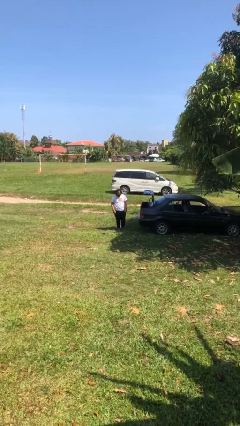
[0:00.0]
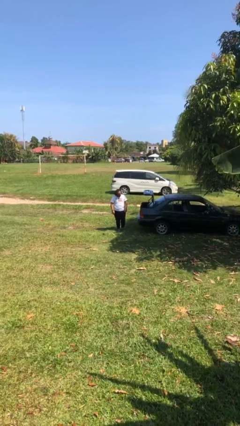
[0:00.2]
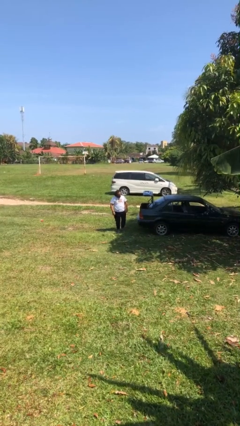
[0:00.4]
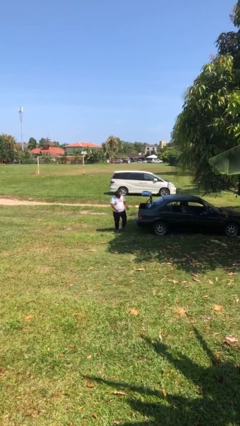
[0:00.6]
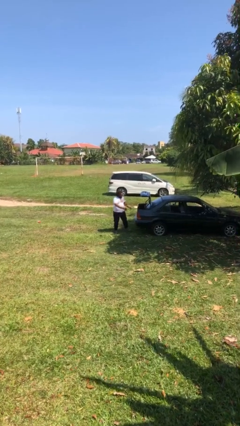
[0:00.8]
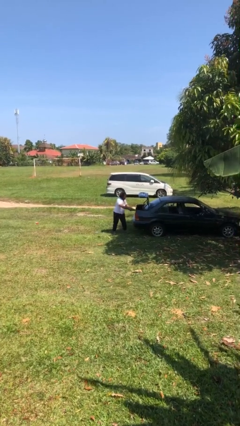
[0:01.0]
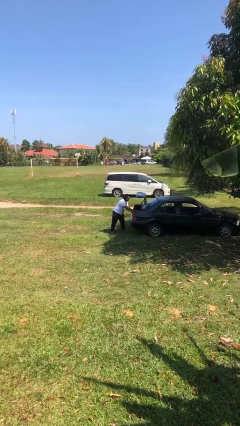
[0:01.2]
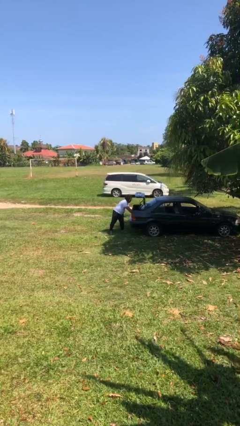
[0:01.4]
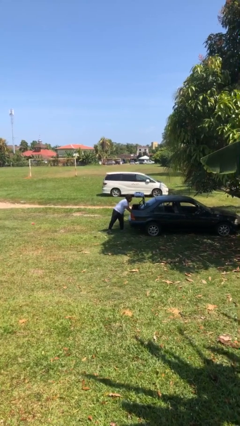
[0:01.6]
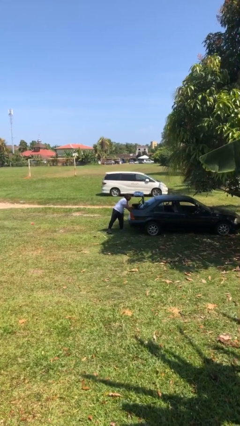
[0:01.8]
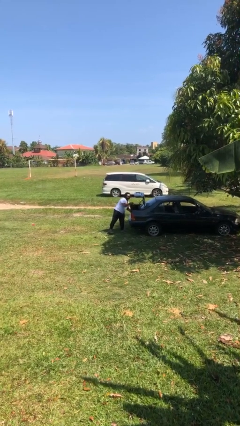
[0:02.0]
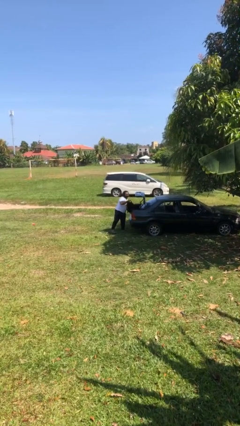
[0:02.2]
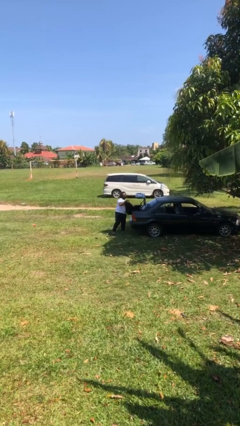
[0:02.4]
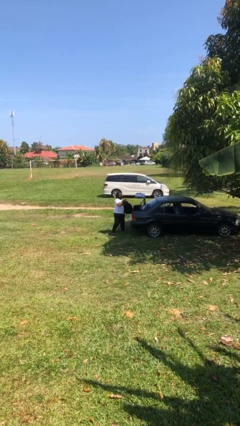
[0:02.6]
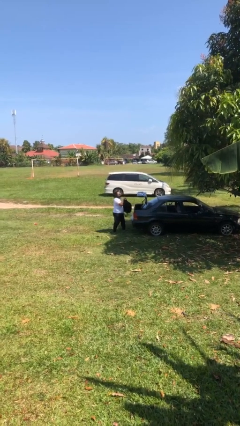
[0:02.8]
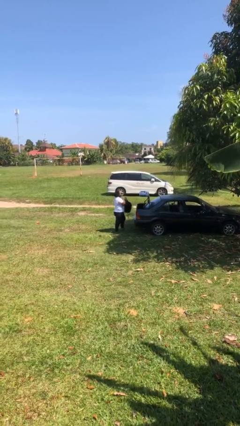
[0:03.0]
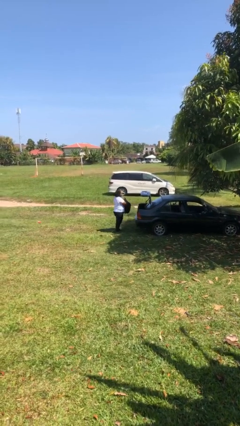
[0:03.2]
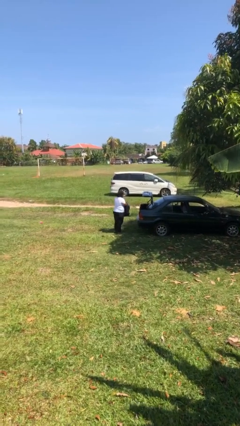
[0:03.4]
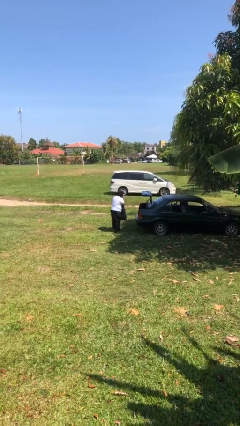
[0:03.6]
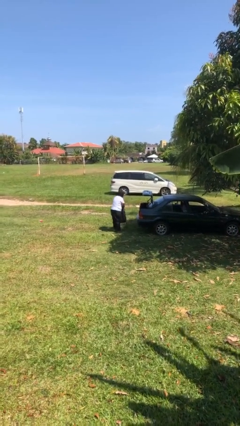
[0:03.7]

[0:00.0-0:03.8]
person unloads car

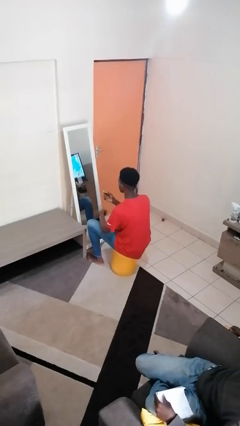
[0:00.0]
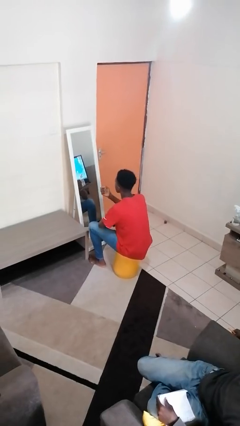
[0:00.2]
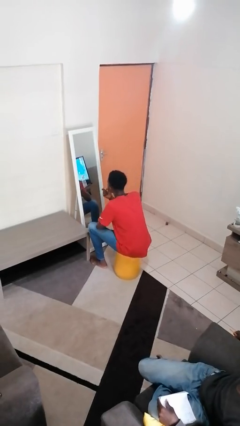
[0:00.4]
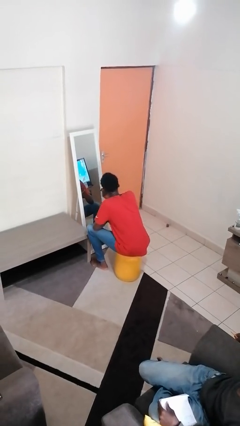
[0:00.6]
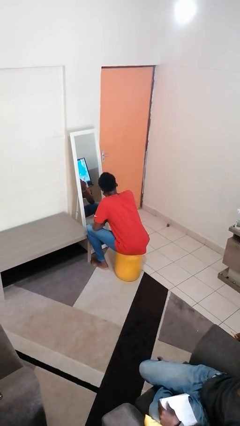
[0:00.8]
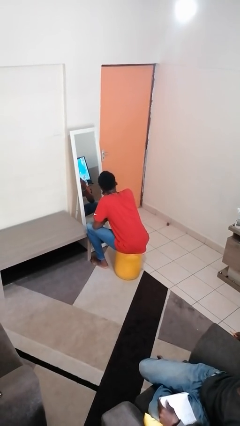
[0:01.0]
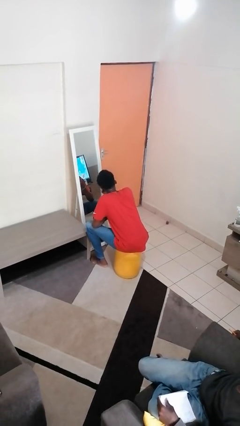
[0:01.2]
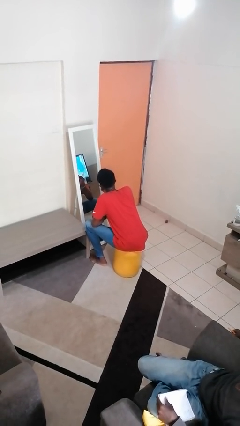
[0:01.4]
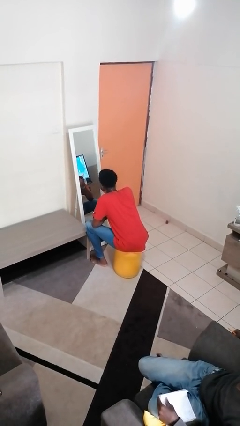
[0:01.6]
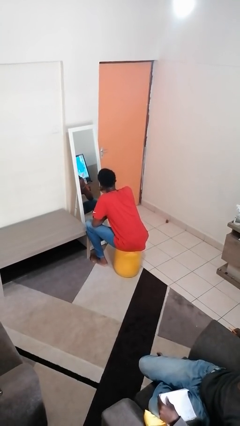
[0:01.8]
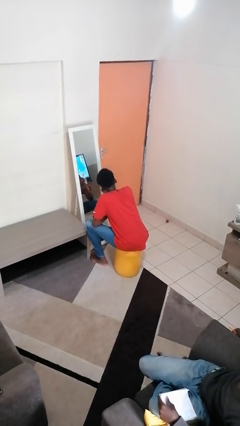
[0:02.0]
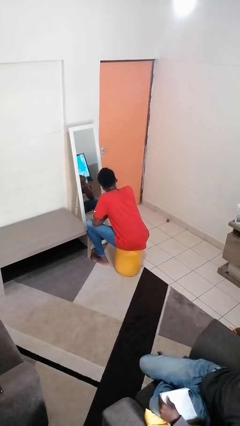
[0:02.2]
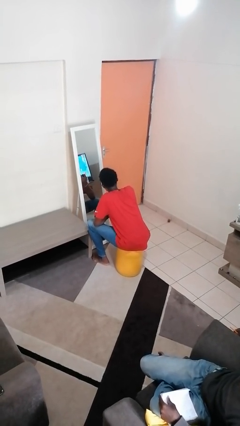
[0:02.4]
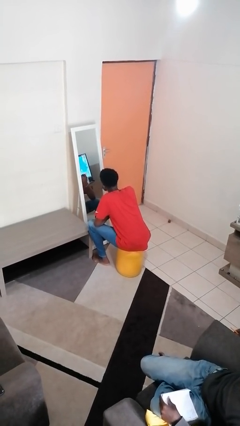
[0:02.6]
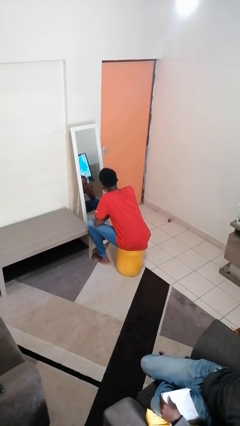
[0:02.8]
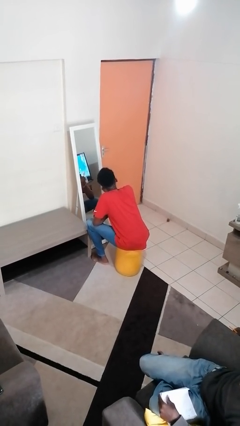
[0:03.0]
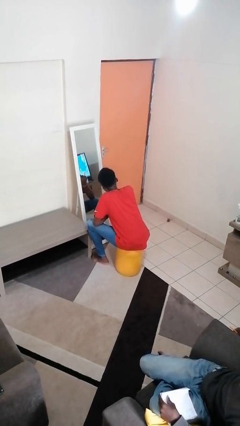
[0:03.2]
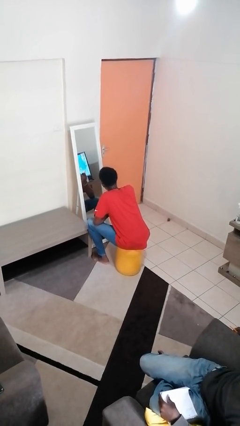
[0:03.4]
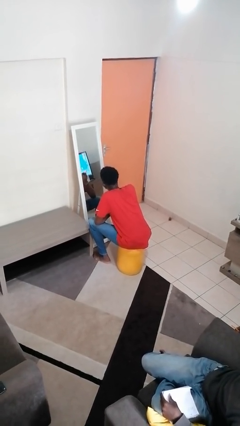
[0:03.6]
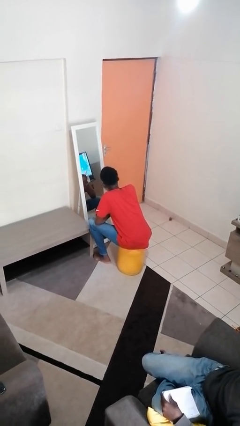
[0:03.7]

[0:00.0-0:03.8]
person applies lip makeup

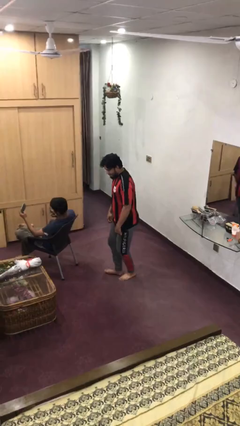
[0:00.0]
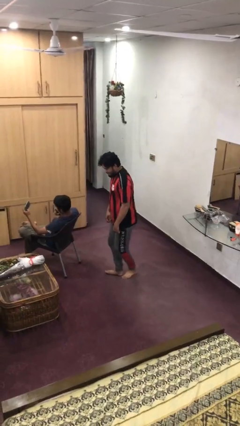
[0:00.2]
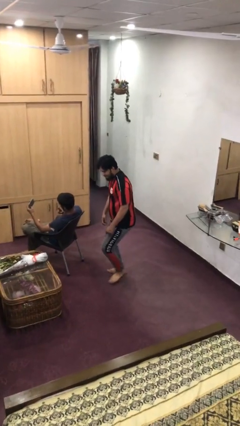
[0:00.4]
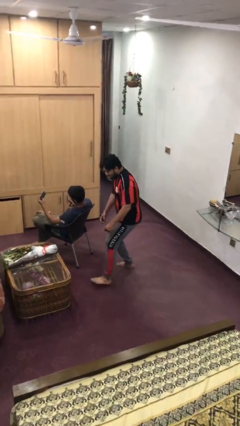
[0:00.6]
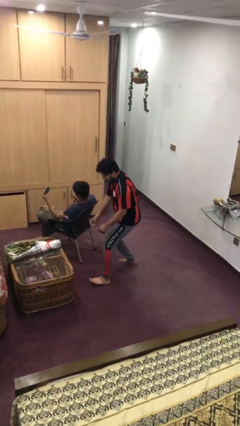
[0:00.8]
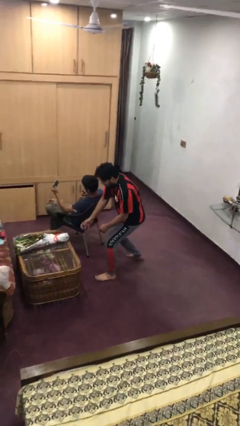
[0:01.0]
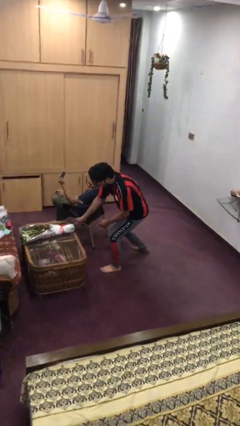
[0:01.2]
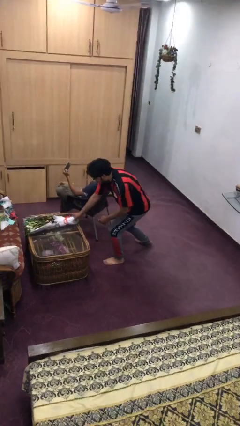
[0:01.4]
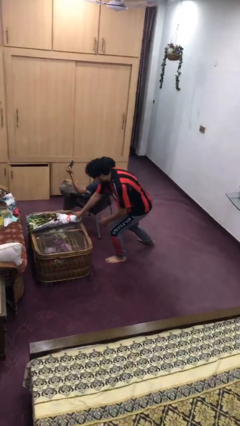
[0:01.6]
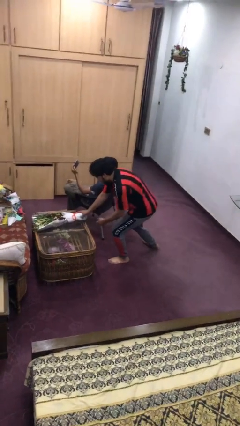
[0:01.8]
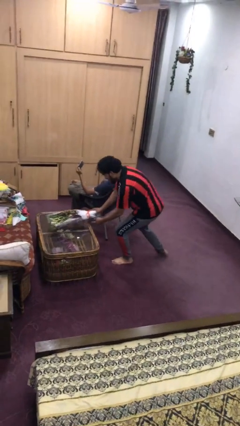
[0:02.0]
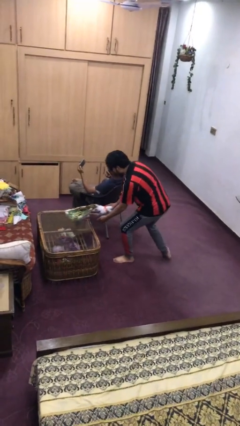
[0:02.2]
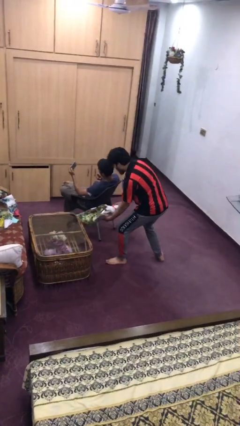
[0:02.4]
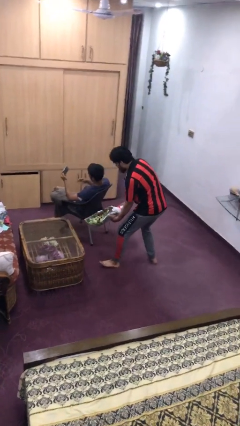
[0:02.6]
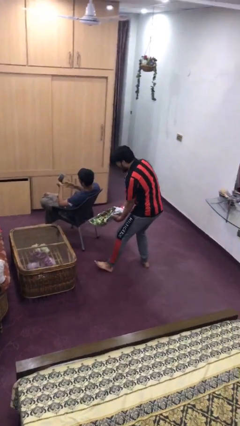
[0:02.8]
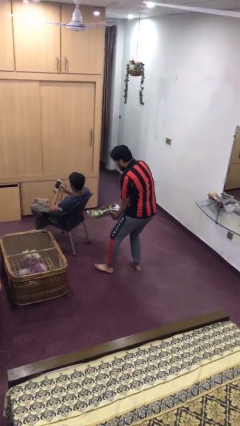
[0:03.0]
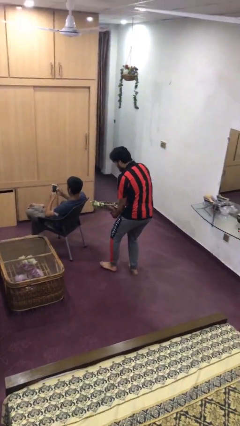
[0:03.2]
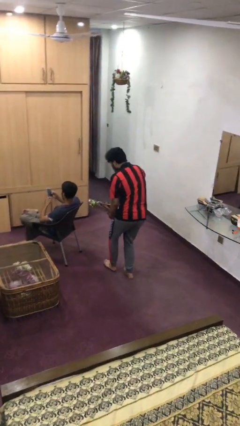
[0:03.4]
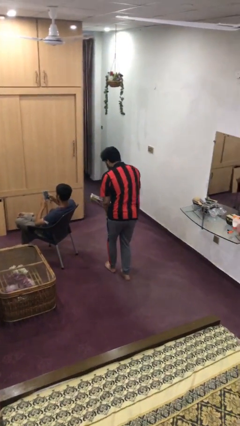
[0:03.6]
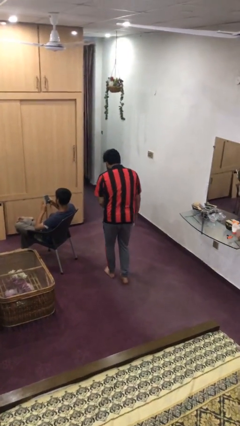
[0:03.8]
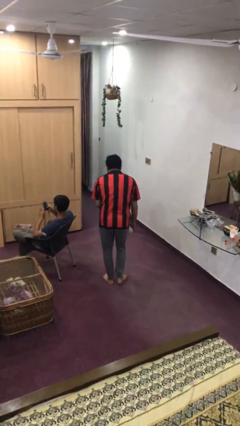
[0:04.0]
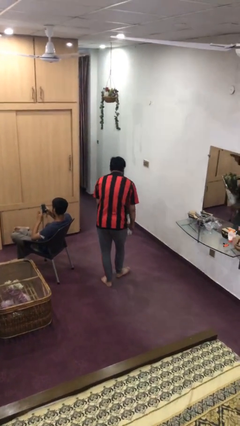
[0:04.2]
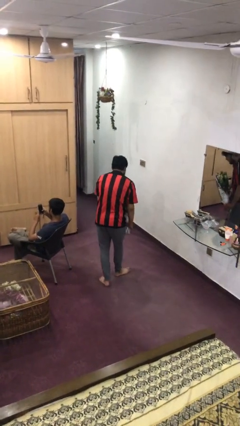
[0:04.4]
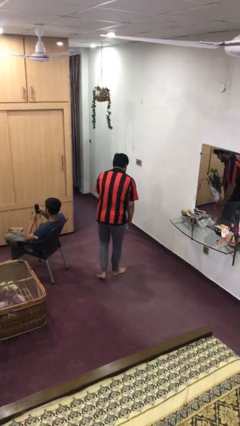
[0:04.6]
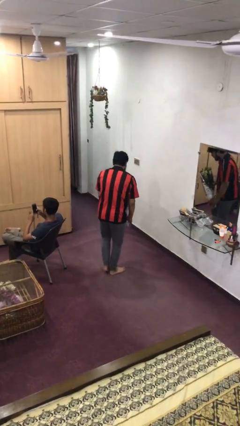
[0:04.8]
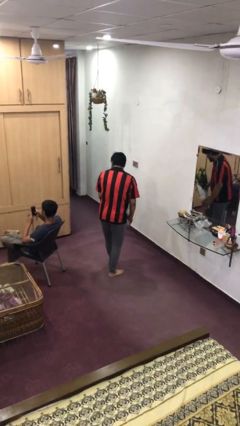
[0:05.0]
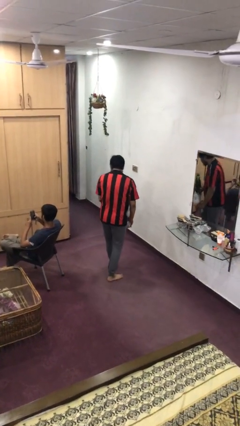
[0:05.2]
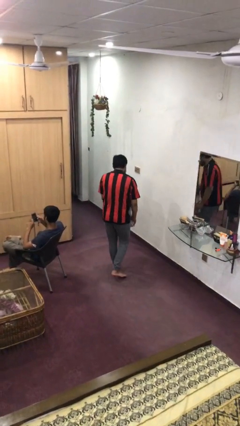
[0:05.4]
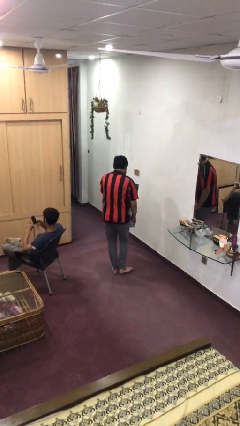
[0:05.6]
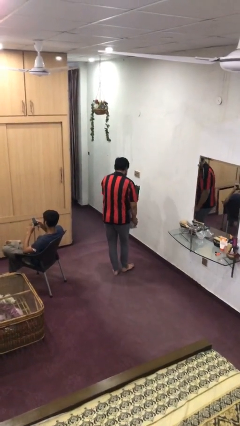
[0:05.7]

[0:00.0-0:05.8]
person steals object from person

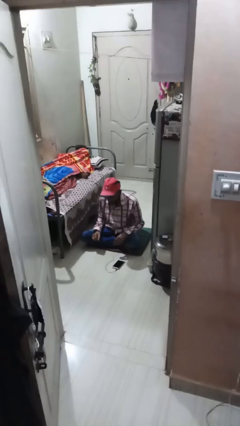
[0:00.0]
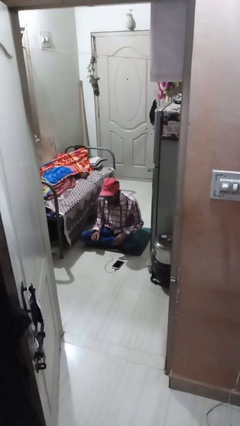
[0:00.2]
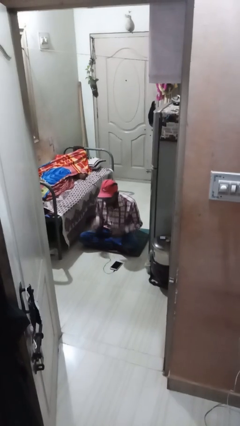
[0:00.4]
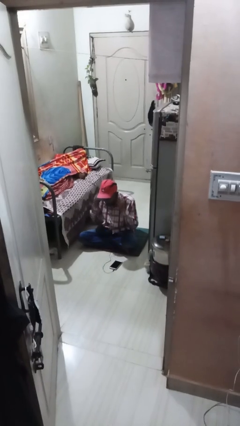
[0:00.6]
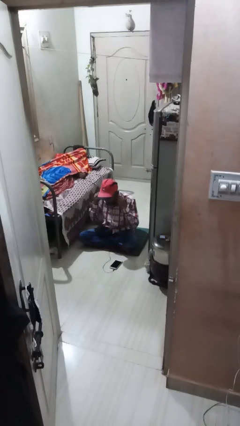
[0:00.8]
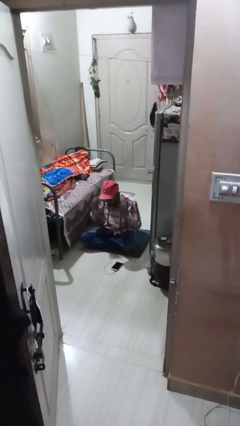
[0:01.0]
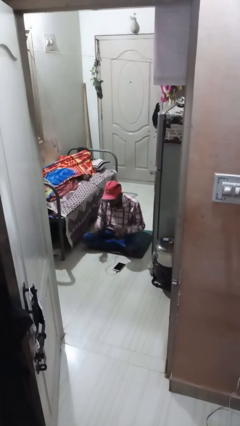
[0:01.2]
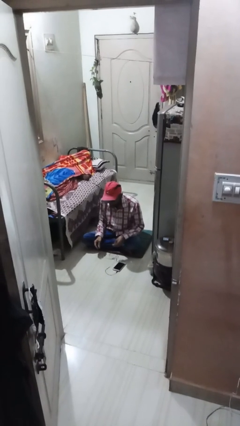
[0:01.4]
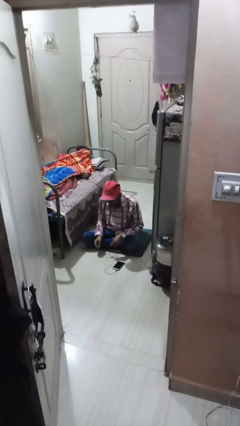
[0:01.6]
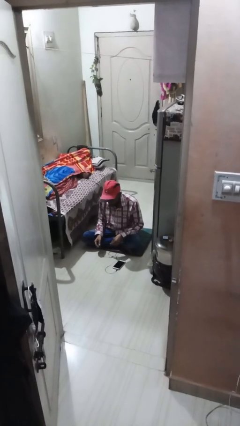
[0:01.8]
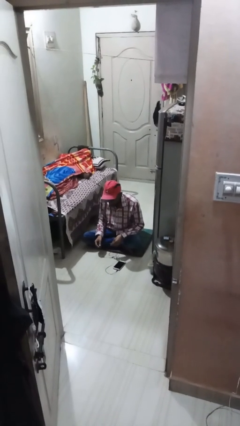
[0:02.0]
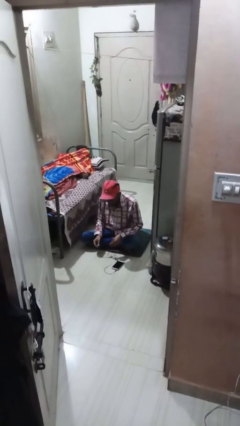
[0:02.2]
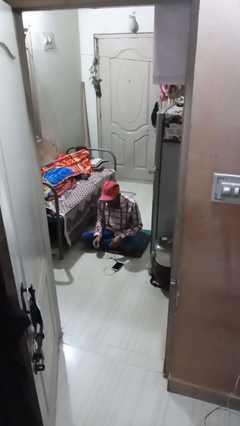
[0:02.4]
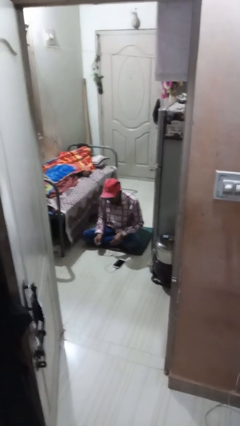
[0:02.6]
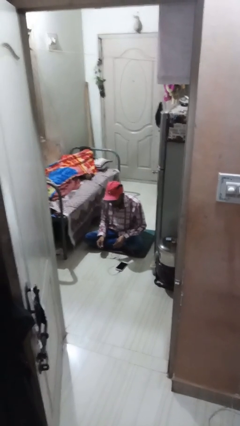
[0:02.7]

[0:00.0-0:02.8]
person takes off headphones

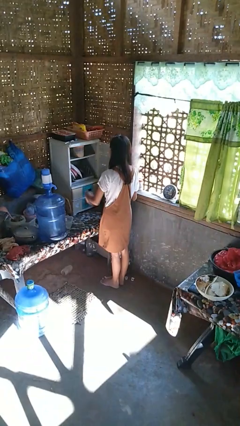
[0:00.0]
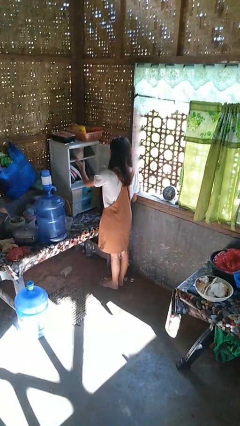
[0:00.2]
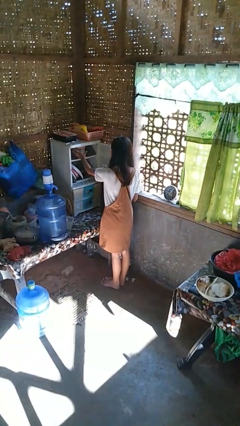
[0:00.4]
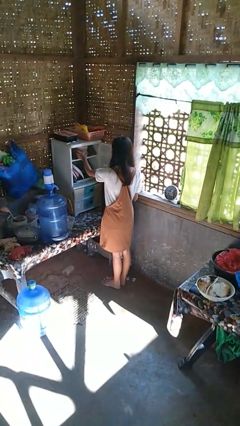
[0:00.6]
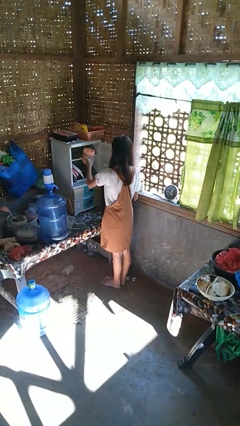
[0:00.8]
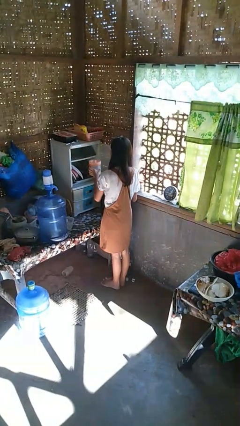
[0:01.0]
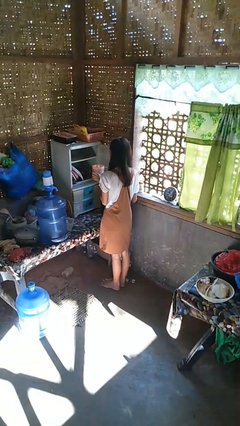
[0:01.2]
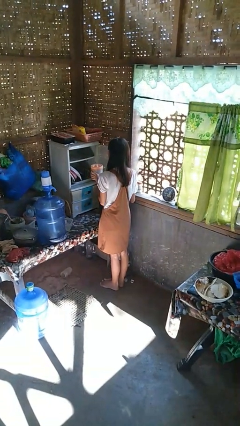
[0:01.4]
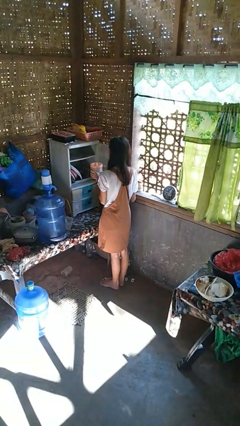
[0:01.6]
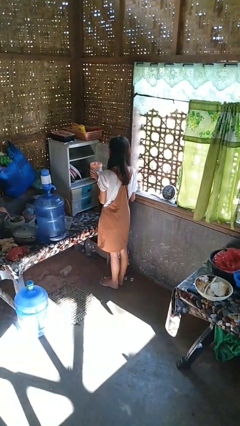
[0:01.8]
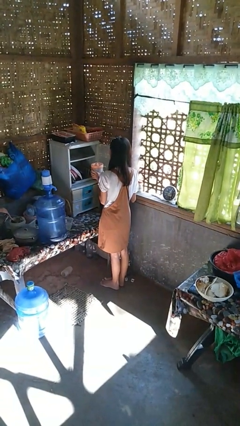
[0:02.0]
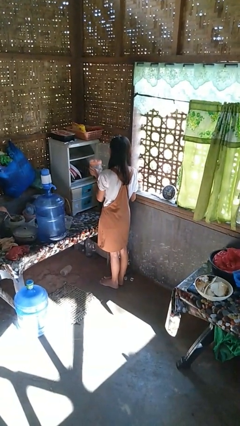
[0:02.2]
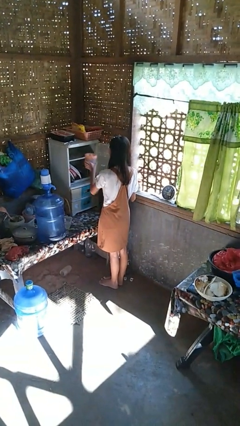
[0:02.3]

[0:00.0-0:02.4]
person picks up object from cabinet
